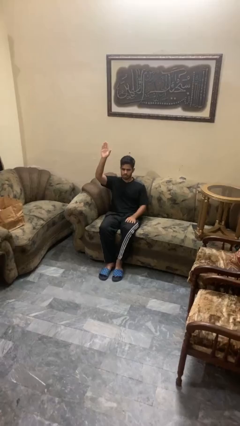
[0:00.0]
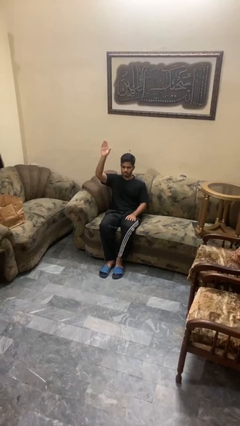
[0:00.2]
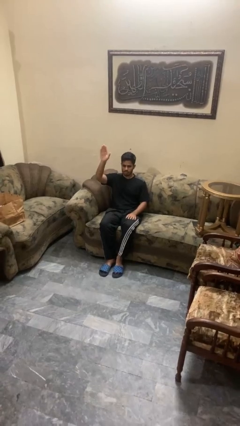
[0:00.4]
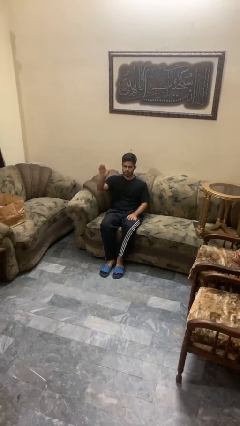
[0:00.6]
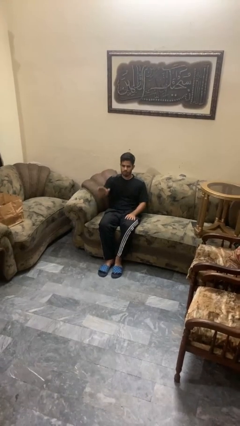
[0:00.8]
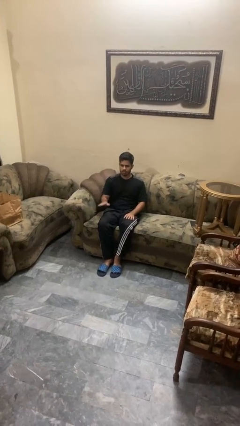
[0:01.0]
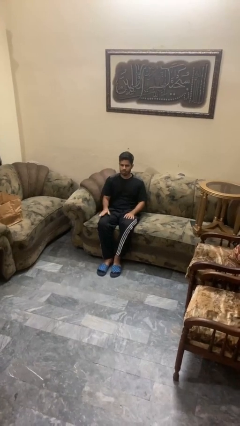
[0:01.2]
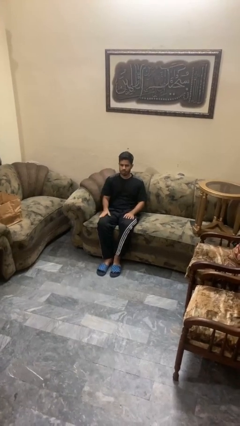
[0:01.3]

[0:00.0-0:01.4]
person gestures lower hand

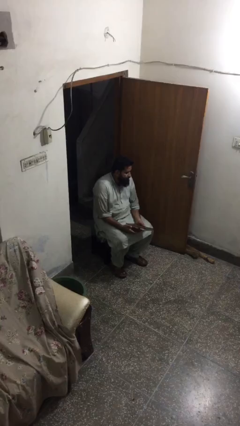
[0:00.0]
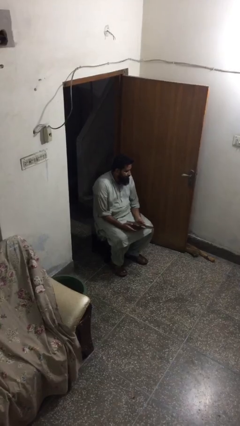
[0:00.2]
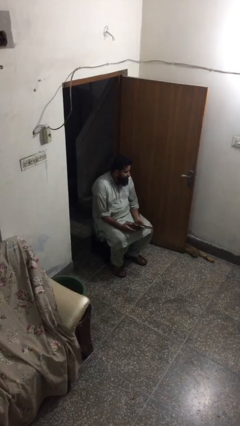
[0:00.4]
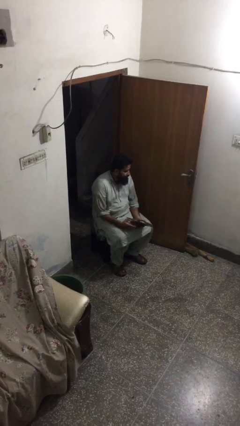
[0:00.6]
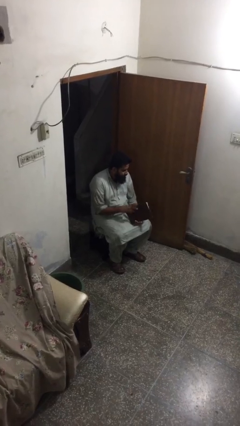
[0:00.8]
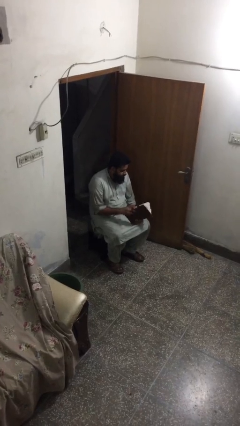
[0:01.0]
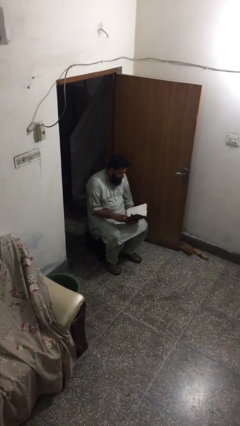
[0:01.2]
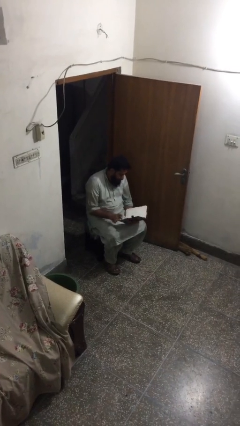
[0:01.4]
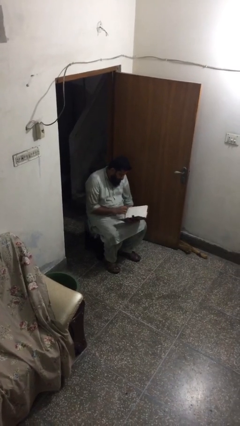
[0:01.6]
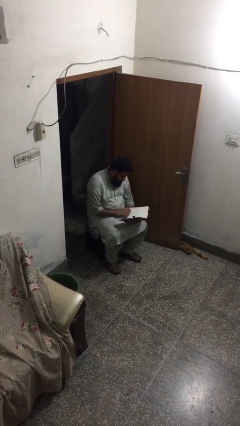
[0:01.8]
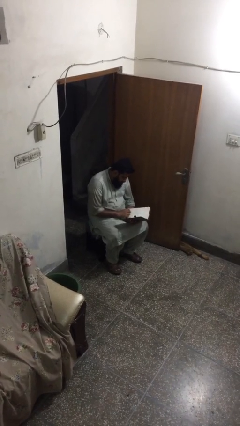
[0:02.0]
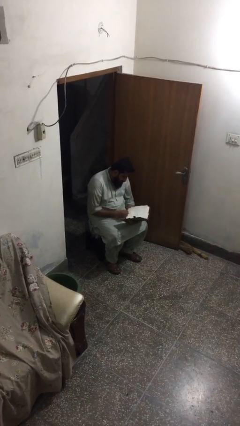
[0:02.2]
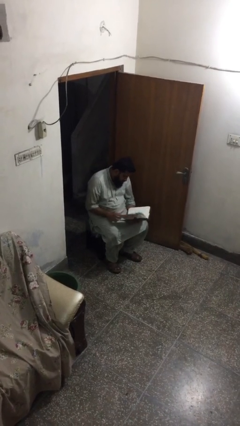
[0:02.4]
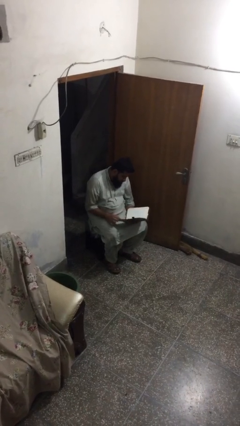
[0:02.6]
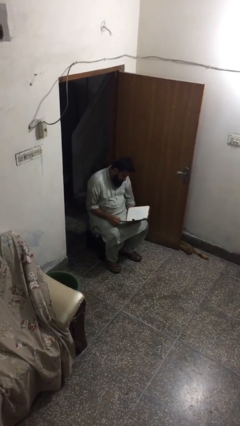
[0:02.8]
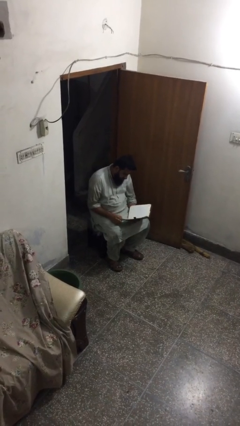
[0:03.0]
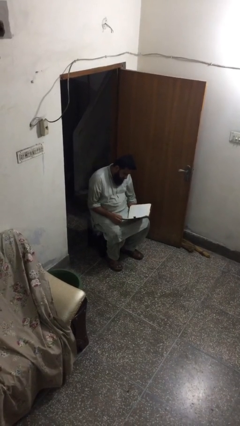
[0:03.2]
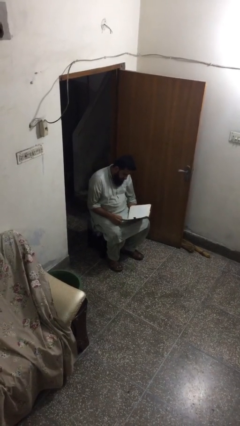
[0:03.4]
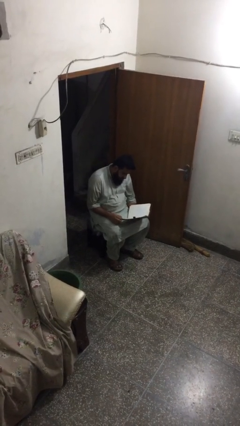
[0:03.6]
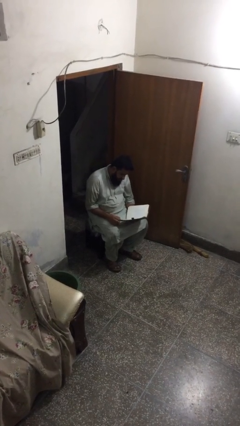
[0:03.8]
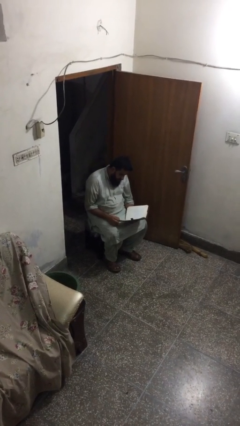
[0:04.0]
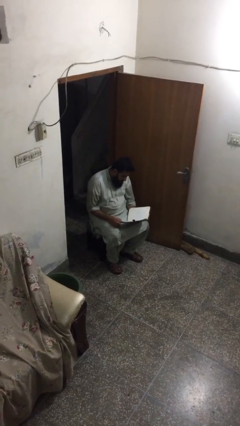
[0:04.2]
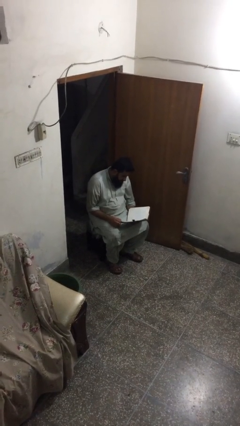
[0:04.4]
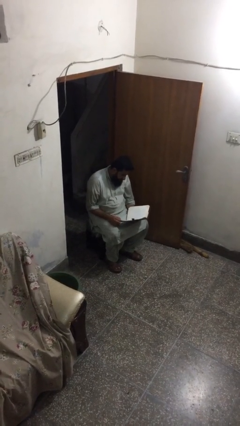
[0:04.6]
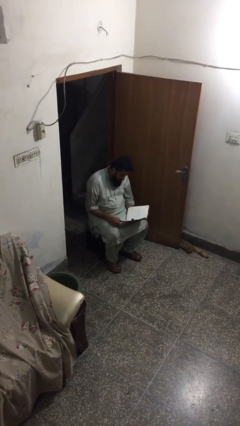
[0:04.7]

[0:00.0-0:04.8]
person reads document

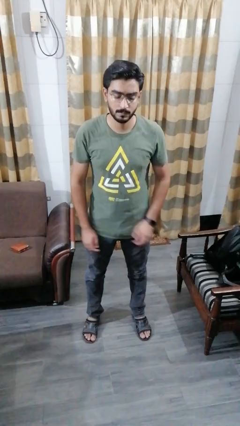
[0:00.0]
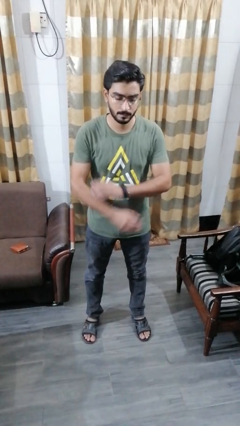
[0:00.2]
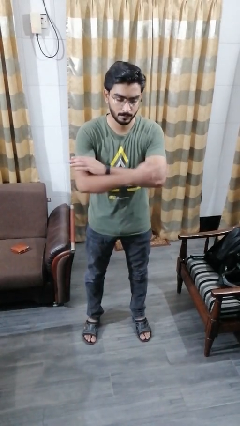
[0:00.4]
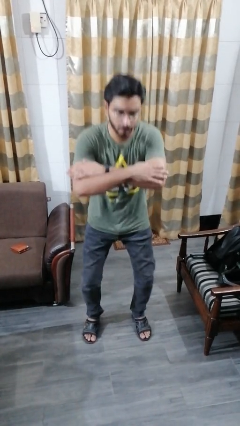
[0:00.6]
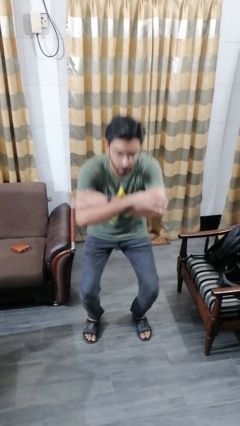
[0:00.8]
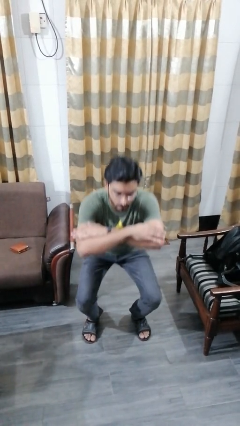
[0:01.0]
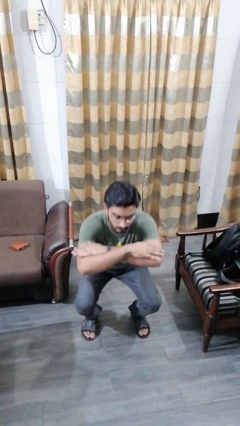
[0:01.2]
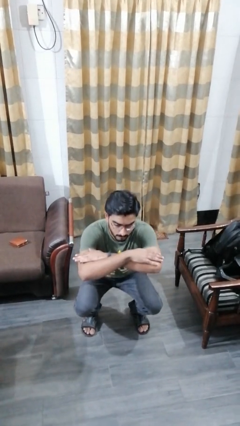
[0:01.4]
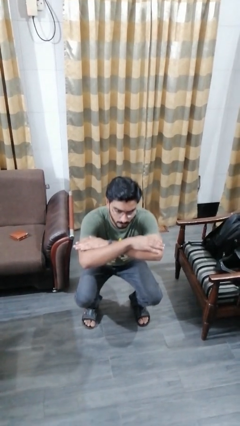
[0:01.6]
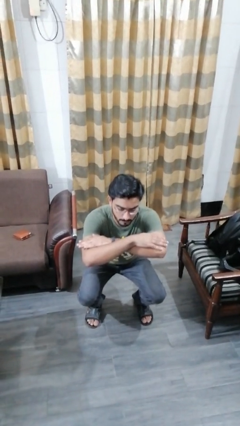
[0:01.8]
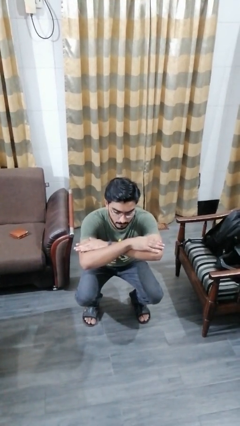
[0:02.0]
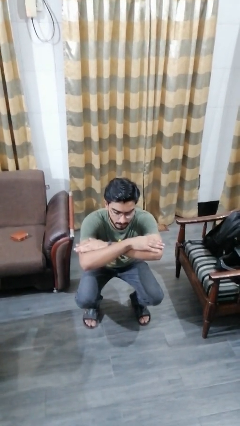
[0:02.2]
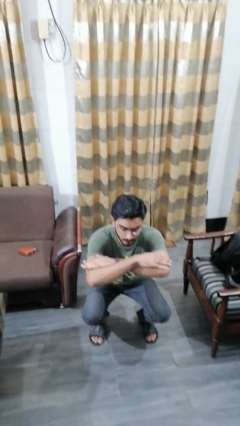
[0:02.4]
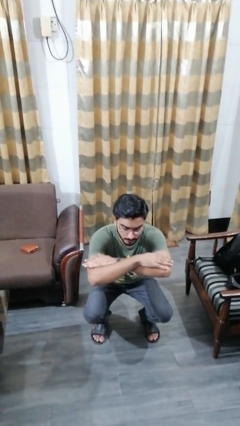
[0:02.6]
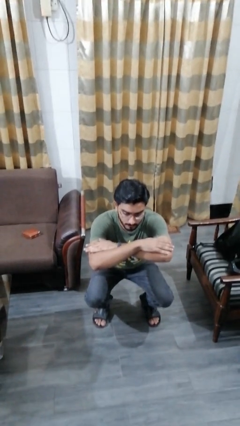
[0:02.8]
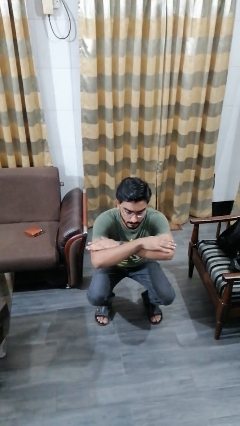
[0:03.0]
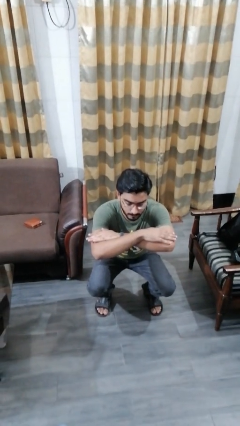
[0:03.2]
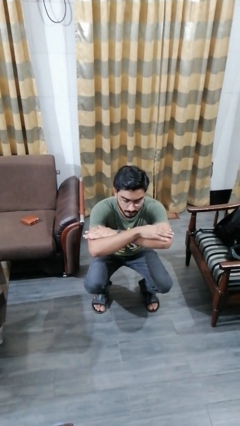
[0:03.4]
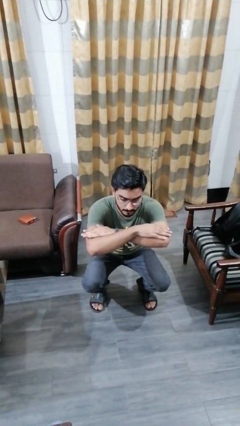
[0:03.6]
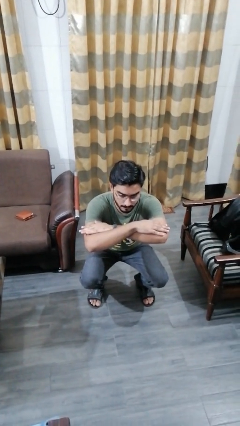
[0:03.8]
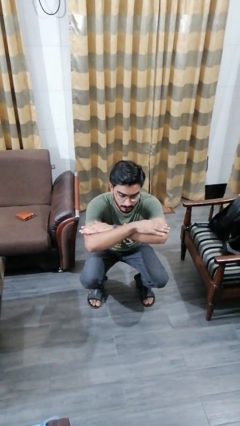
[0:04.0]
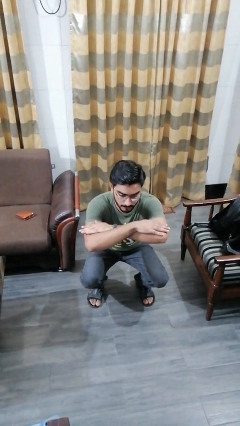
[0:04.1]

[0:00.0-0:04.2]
person squats

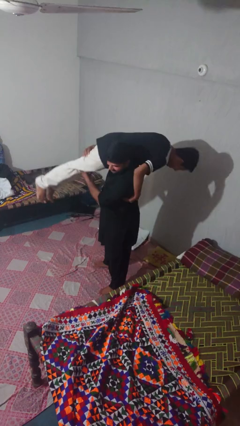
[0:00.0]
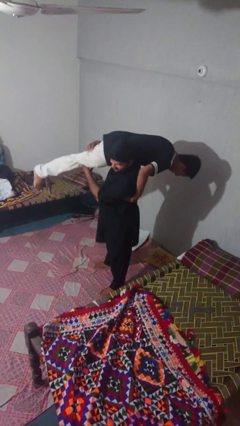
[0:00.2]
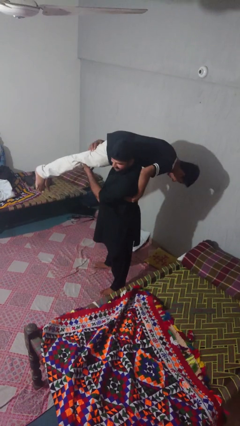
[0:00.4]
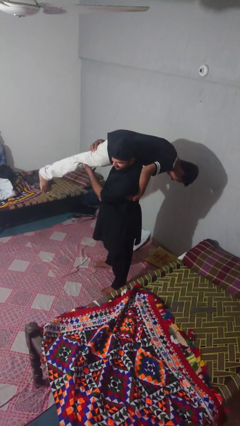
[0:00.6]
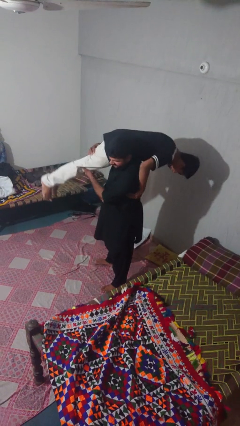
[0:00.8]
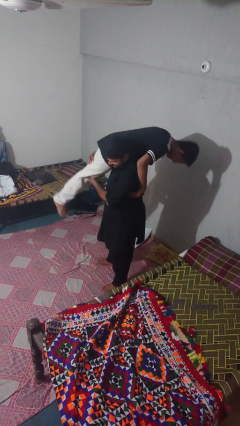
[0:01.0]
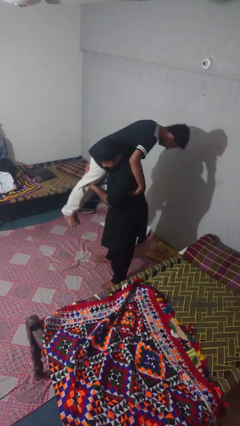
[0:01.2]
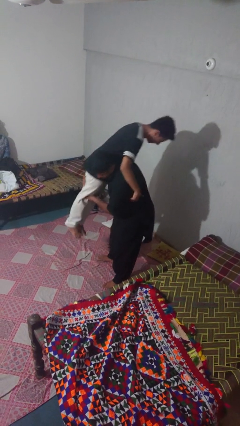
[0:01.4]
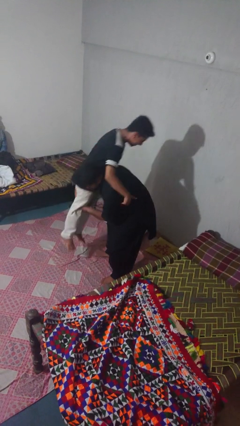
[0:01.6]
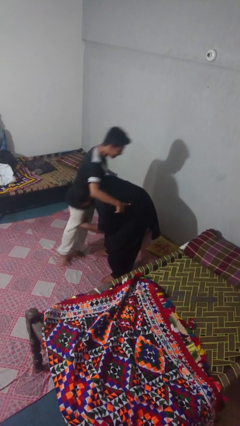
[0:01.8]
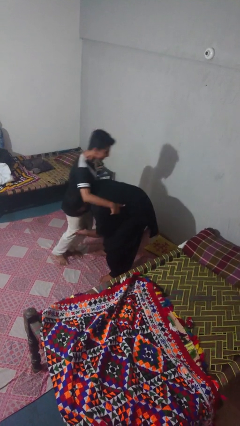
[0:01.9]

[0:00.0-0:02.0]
person puts down person

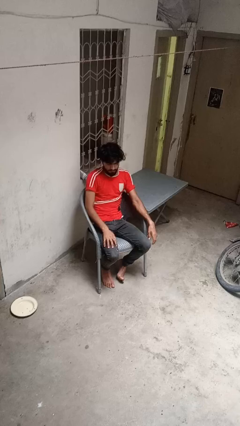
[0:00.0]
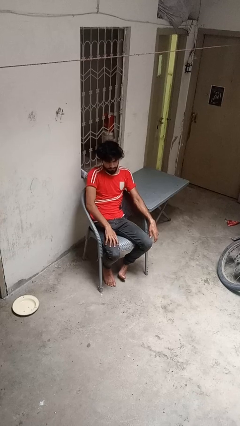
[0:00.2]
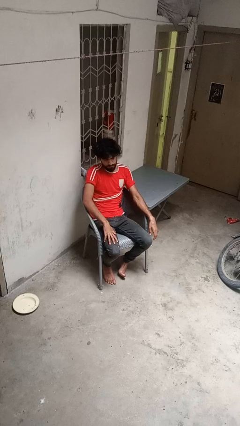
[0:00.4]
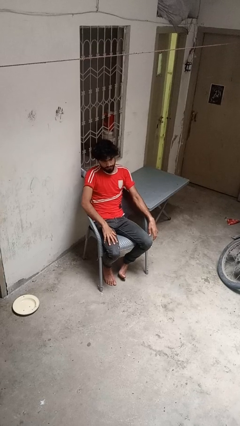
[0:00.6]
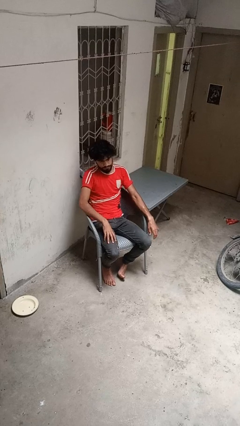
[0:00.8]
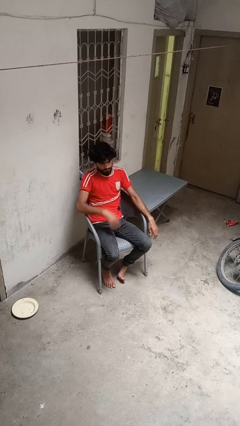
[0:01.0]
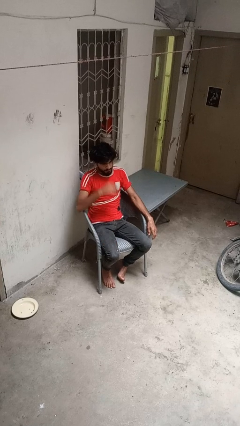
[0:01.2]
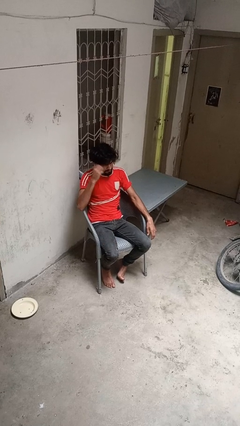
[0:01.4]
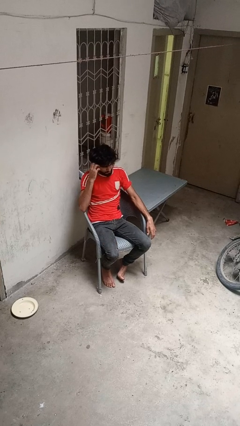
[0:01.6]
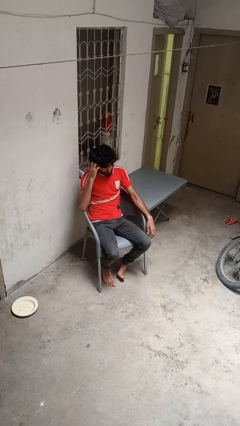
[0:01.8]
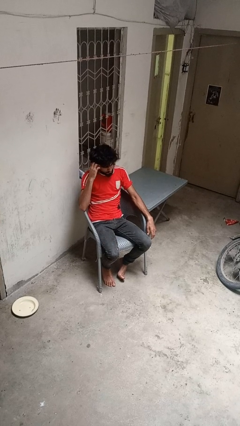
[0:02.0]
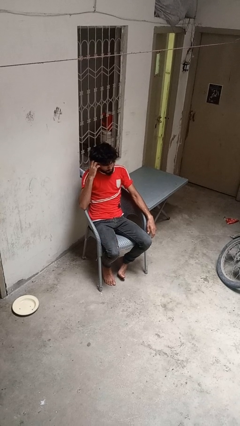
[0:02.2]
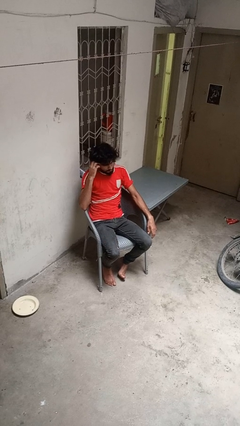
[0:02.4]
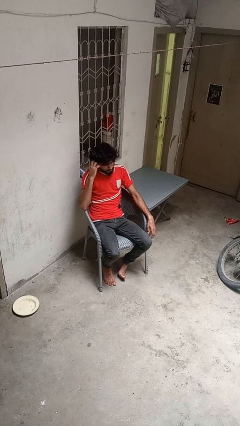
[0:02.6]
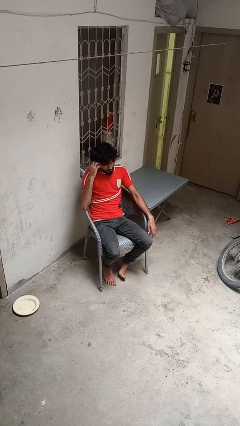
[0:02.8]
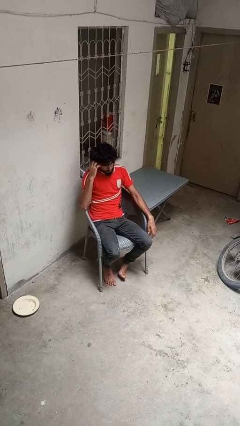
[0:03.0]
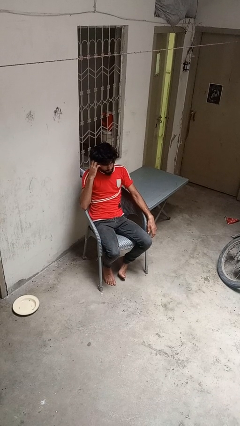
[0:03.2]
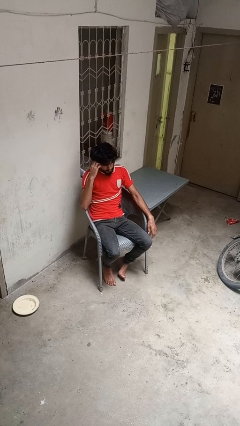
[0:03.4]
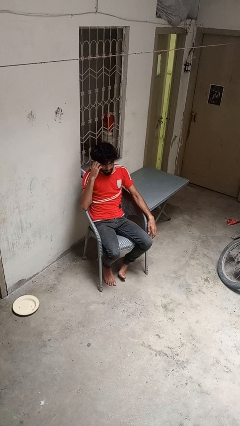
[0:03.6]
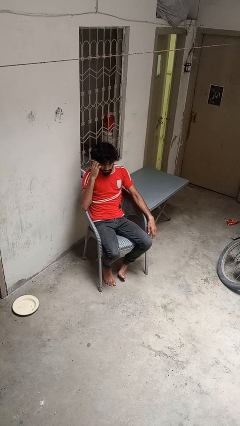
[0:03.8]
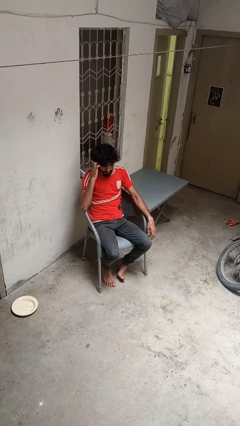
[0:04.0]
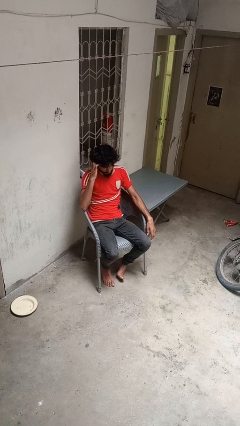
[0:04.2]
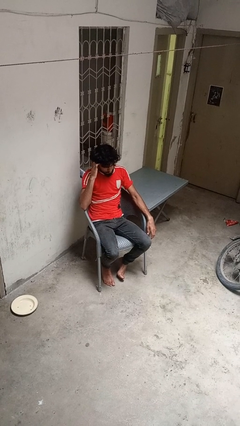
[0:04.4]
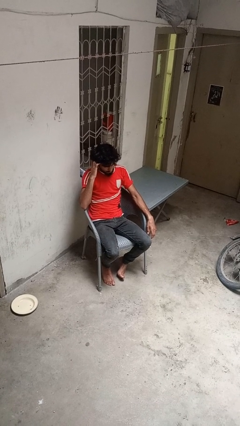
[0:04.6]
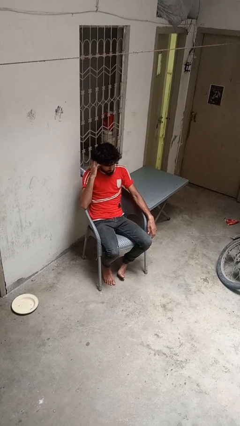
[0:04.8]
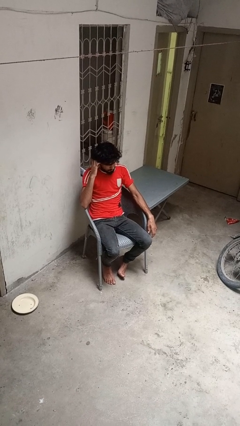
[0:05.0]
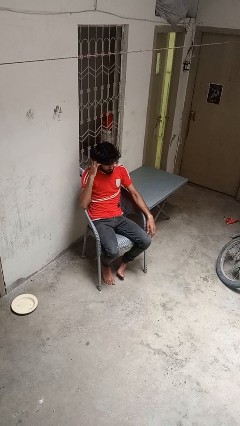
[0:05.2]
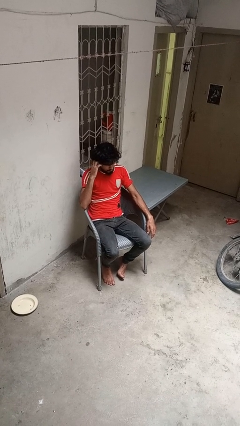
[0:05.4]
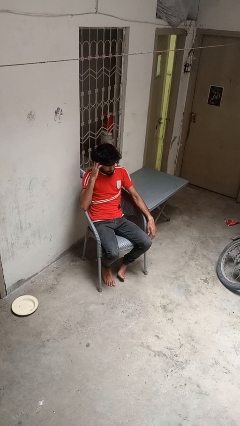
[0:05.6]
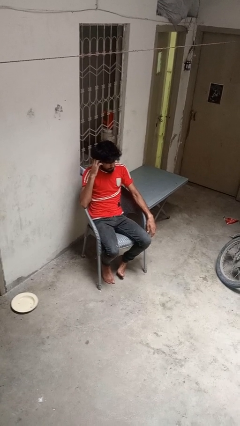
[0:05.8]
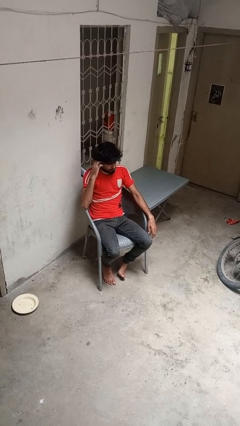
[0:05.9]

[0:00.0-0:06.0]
person strokes hair
